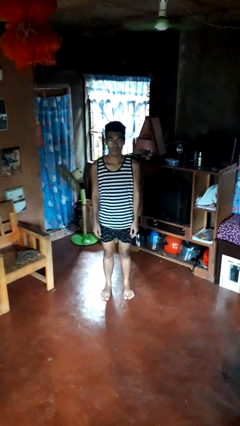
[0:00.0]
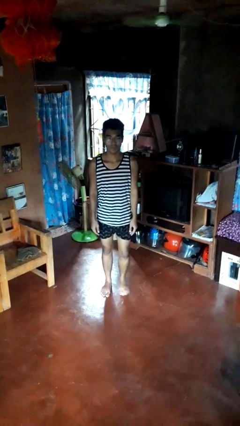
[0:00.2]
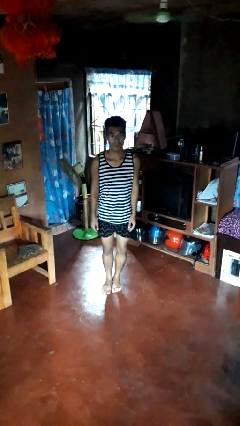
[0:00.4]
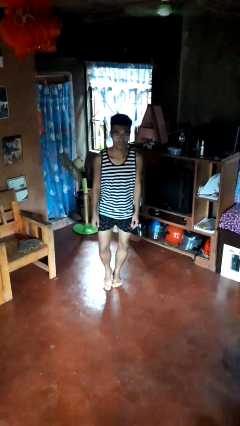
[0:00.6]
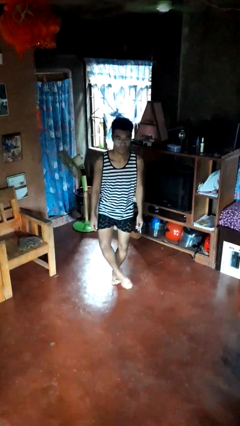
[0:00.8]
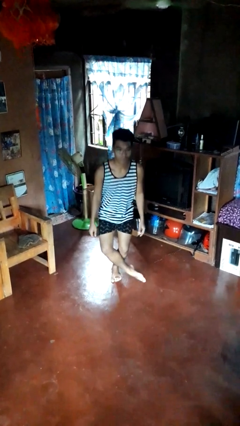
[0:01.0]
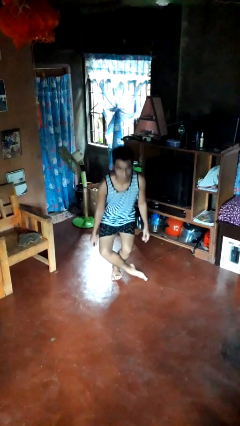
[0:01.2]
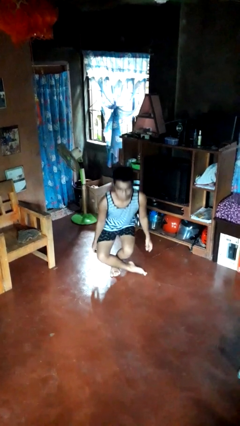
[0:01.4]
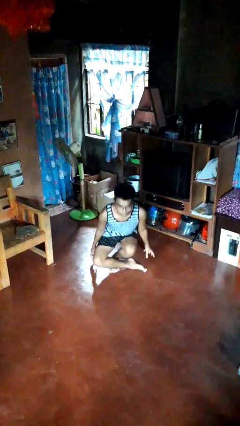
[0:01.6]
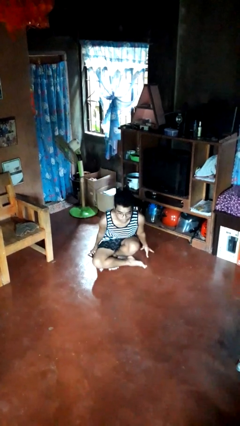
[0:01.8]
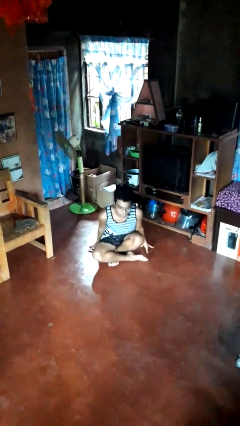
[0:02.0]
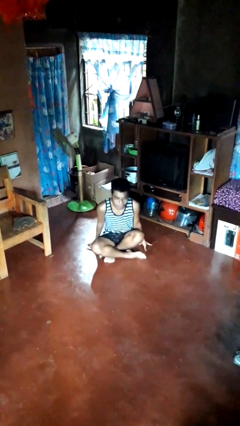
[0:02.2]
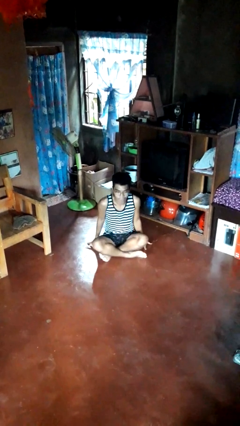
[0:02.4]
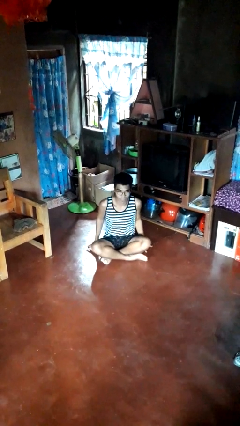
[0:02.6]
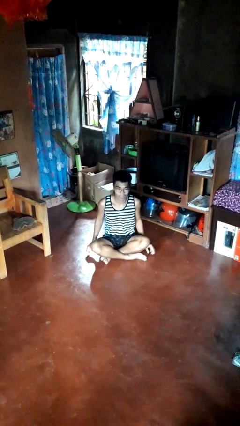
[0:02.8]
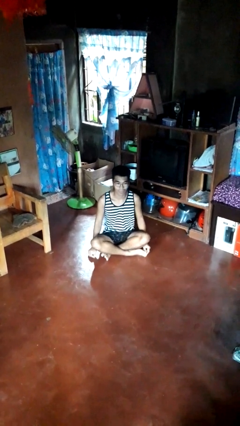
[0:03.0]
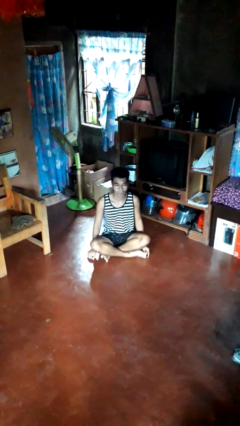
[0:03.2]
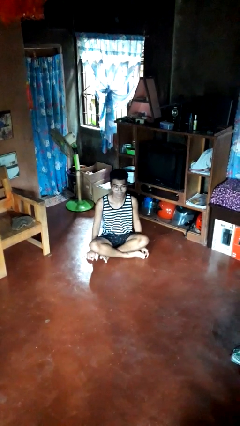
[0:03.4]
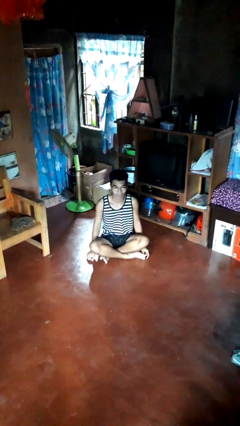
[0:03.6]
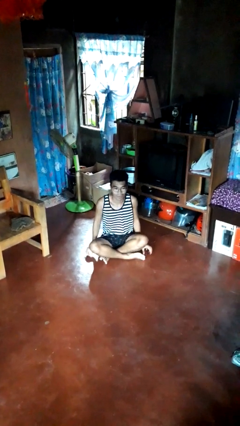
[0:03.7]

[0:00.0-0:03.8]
person sits crisscross

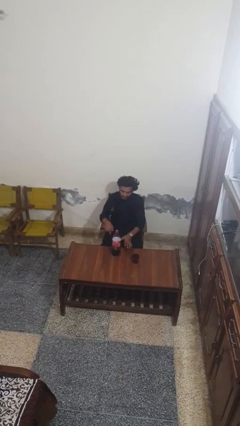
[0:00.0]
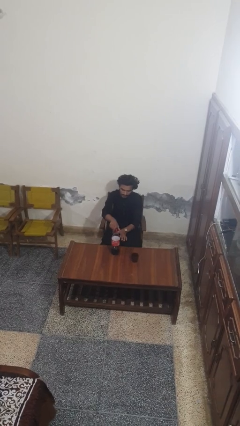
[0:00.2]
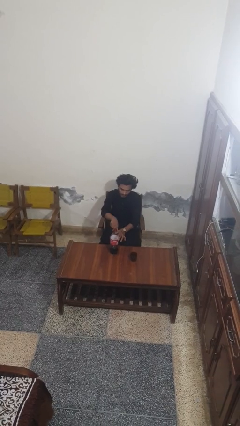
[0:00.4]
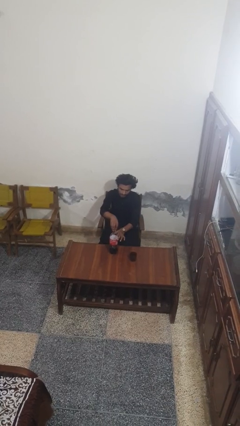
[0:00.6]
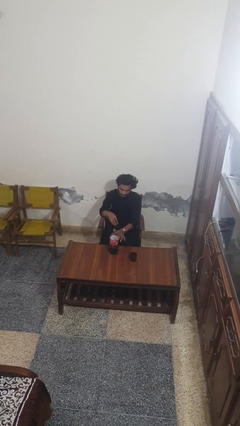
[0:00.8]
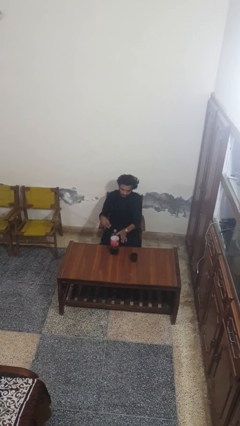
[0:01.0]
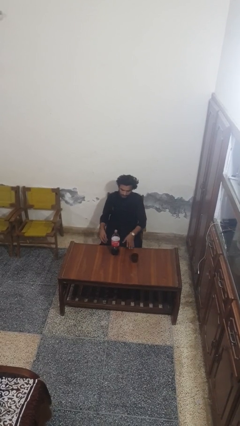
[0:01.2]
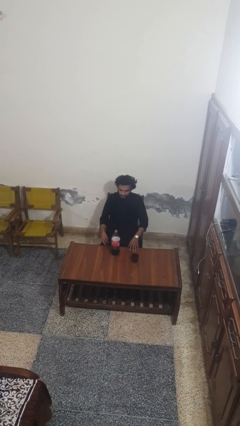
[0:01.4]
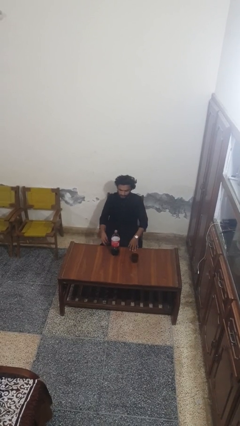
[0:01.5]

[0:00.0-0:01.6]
person unscrews lid from bottle

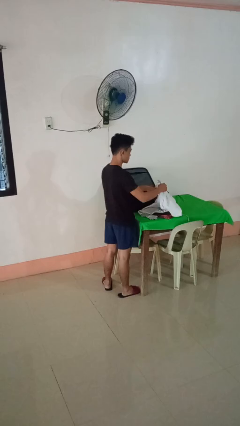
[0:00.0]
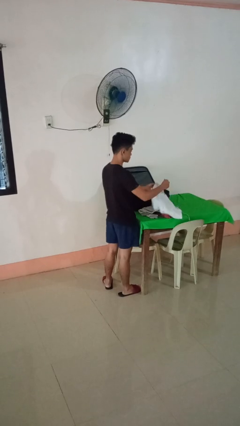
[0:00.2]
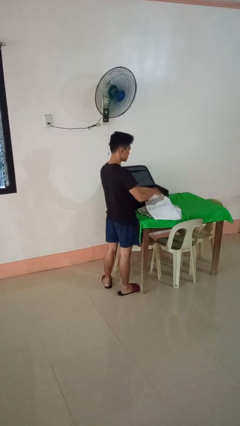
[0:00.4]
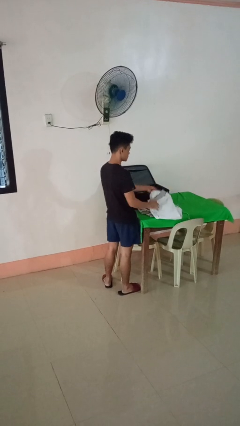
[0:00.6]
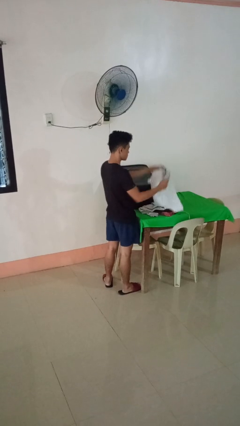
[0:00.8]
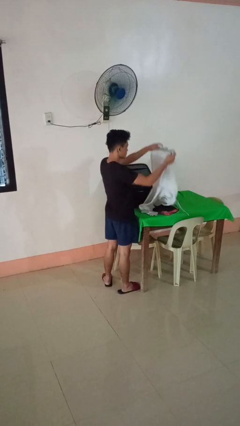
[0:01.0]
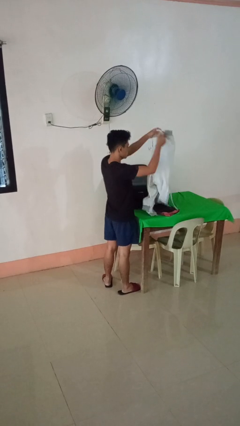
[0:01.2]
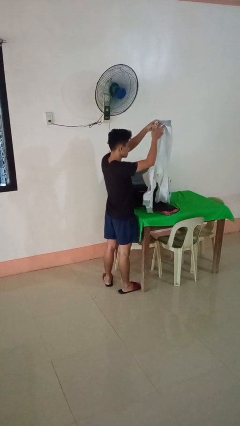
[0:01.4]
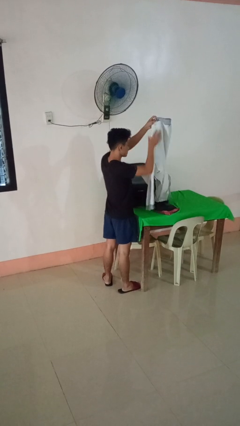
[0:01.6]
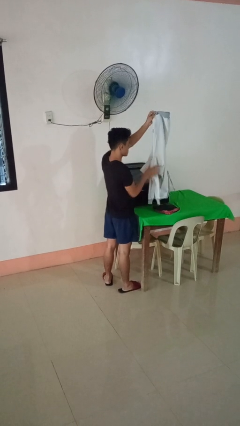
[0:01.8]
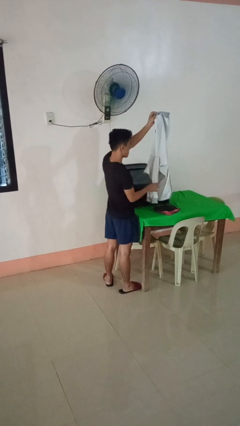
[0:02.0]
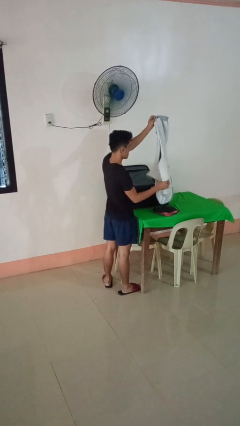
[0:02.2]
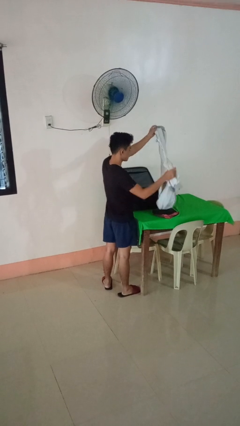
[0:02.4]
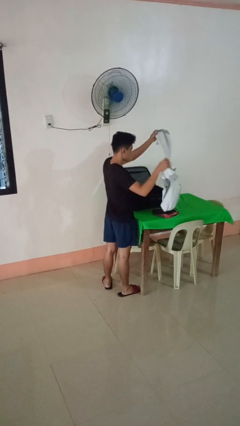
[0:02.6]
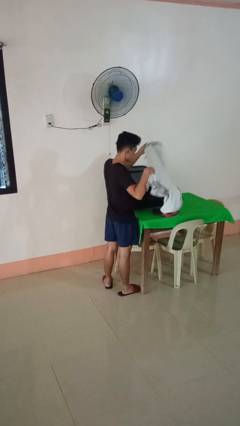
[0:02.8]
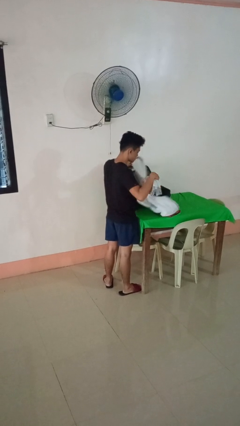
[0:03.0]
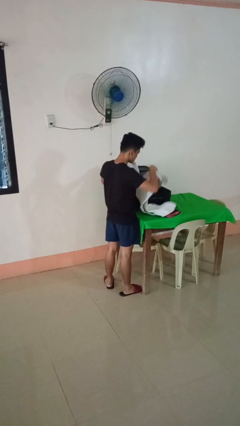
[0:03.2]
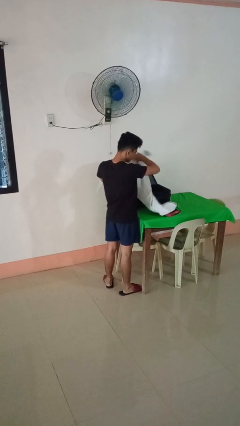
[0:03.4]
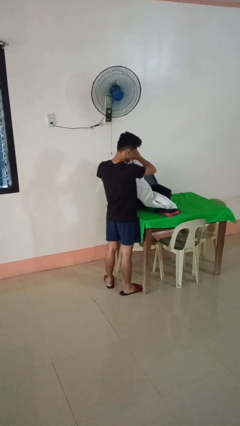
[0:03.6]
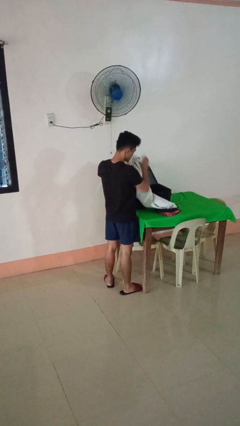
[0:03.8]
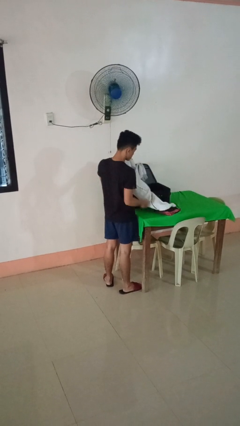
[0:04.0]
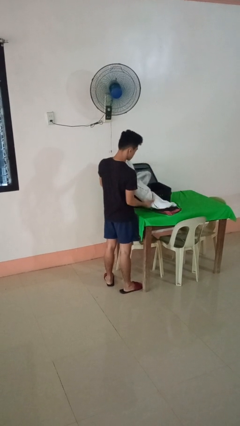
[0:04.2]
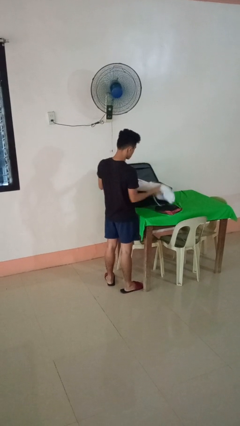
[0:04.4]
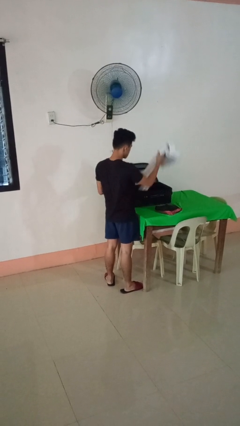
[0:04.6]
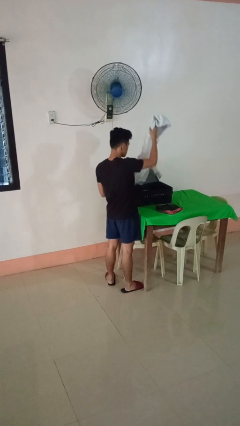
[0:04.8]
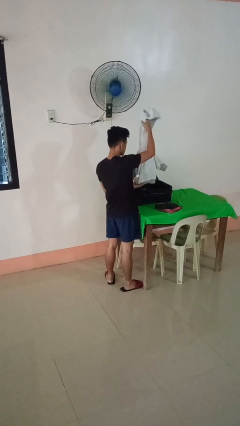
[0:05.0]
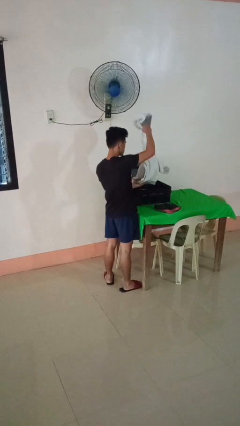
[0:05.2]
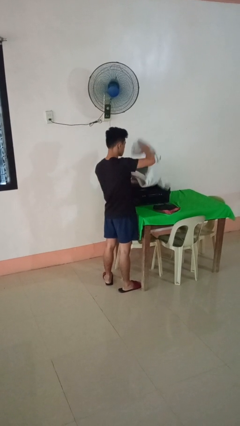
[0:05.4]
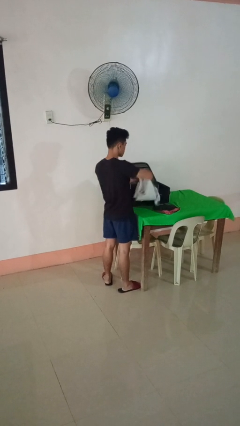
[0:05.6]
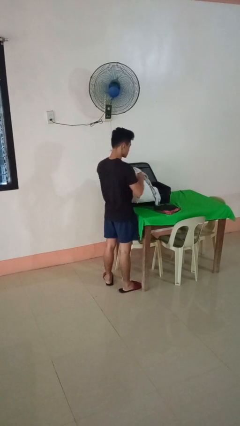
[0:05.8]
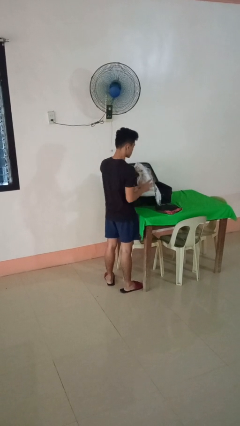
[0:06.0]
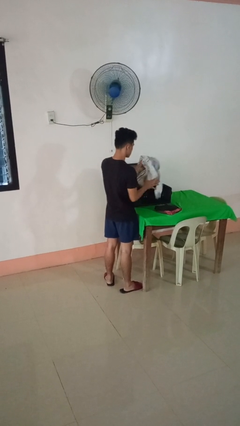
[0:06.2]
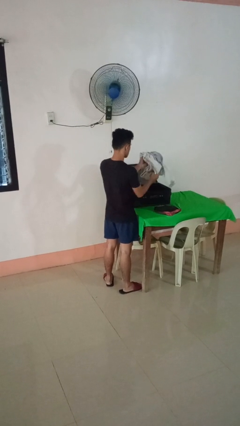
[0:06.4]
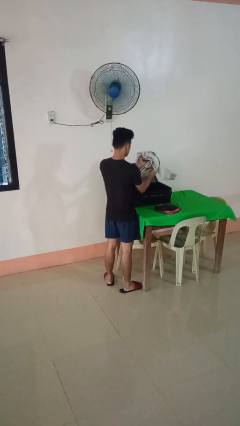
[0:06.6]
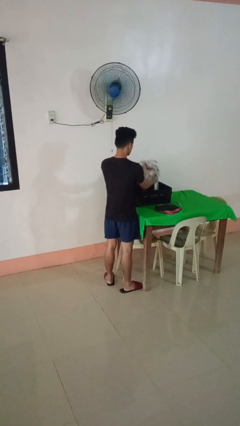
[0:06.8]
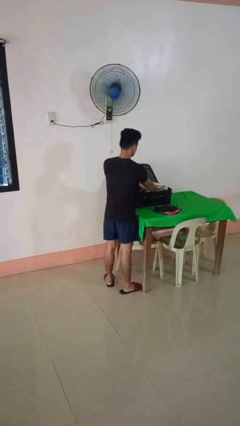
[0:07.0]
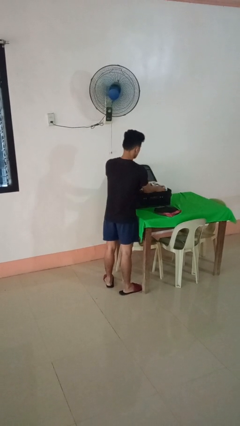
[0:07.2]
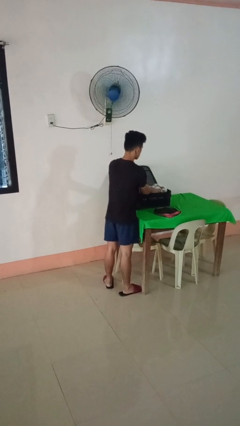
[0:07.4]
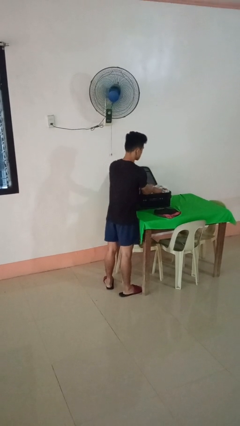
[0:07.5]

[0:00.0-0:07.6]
person loads clothes into suitcase

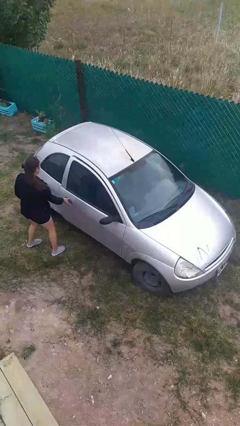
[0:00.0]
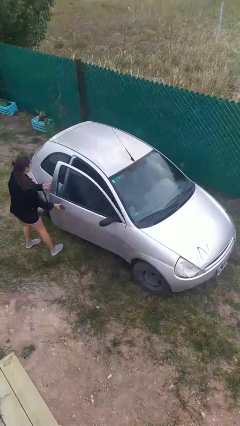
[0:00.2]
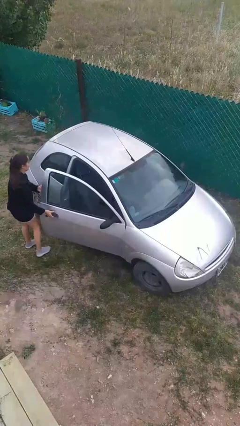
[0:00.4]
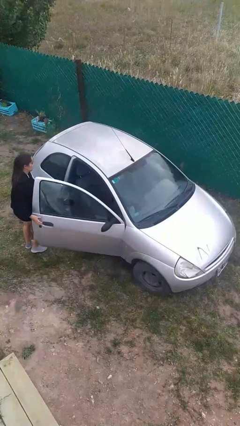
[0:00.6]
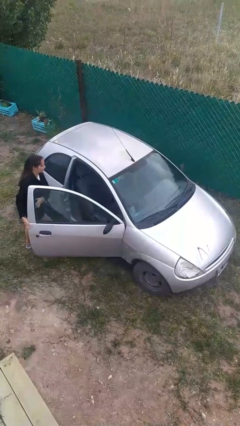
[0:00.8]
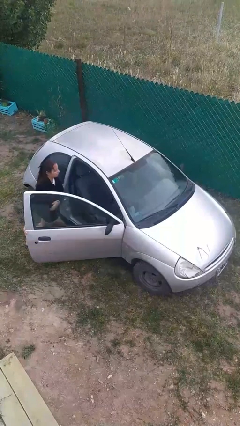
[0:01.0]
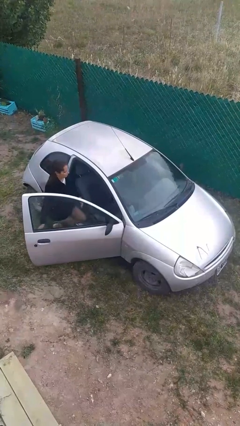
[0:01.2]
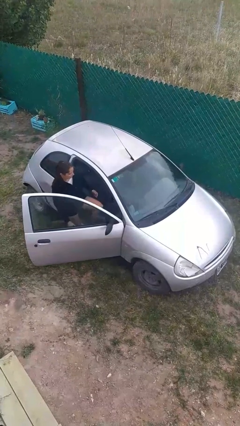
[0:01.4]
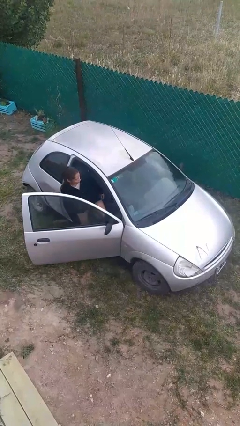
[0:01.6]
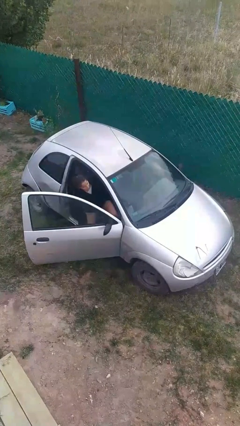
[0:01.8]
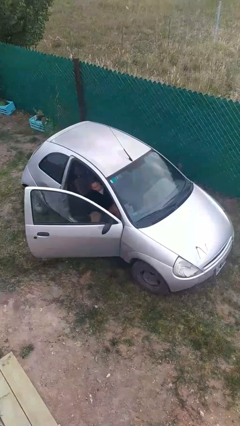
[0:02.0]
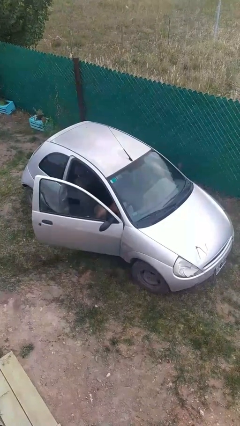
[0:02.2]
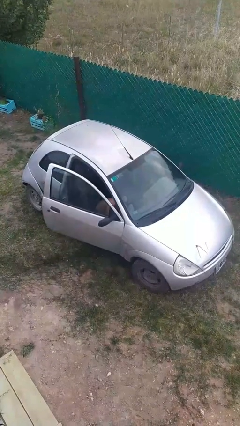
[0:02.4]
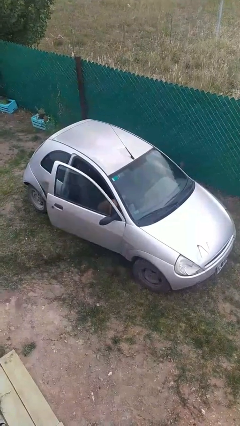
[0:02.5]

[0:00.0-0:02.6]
car picks up person

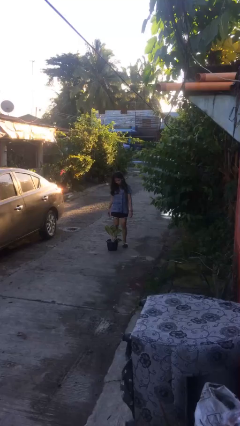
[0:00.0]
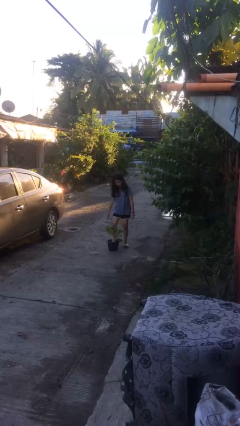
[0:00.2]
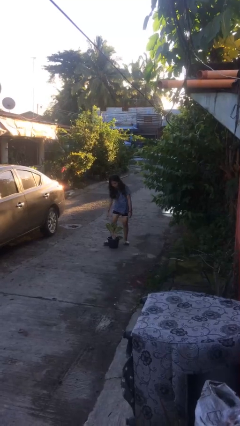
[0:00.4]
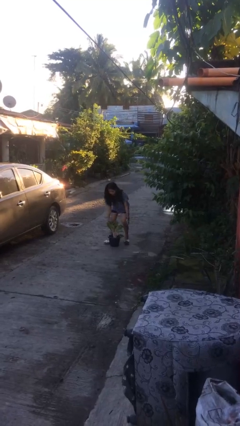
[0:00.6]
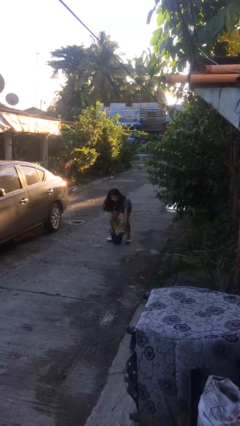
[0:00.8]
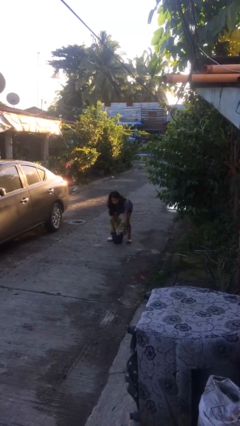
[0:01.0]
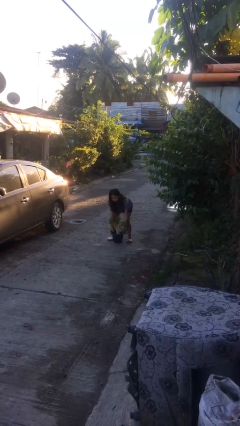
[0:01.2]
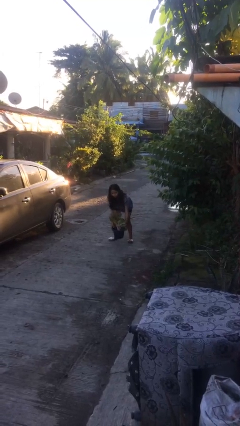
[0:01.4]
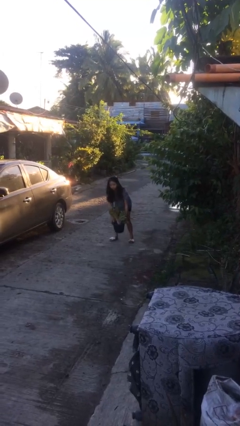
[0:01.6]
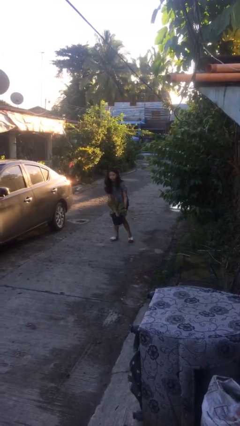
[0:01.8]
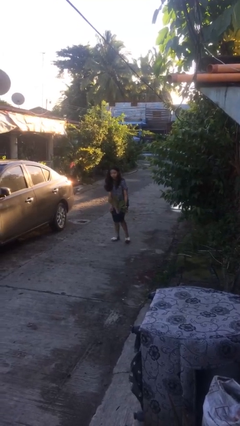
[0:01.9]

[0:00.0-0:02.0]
person picks up object from floor

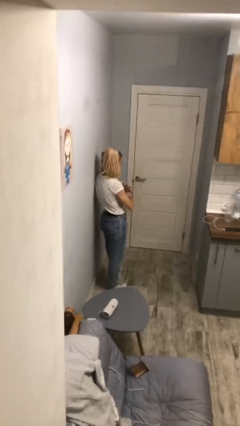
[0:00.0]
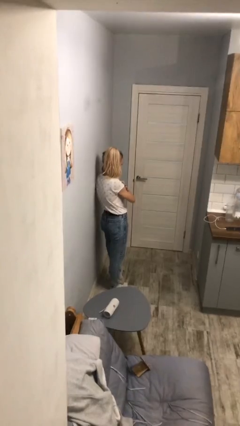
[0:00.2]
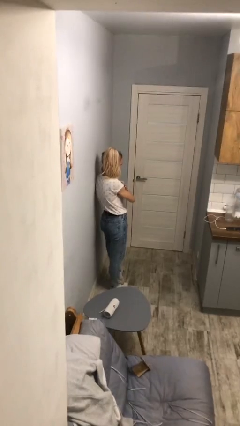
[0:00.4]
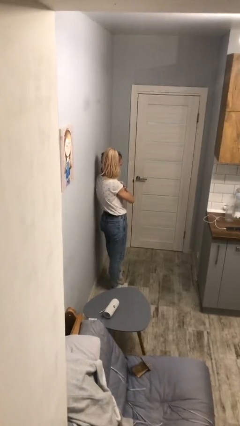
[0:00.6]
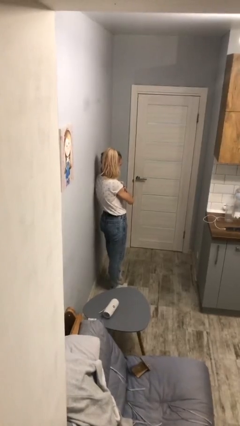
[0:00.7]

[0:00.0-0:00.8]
person crosses arms
